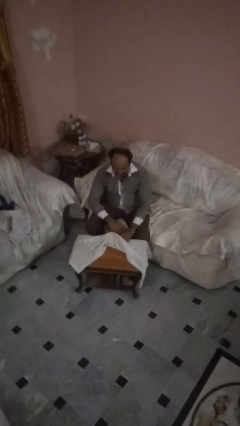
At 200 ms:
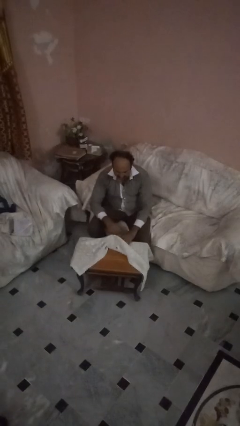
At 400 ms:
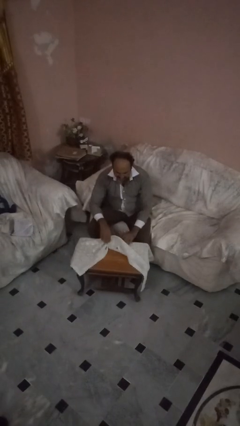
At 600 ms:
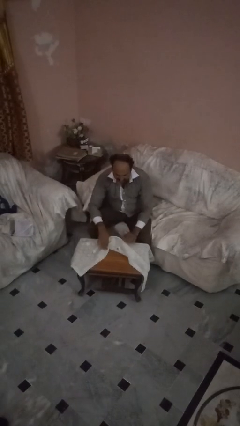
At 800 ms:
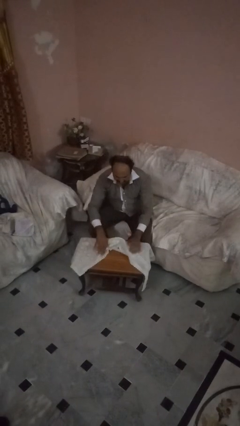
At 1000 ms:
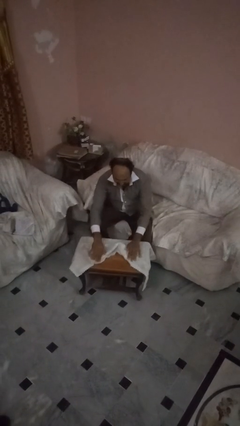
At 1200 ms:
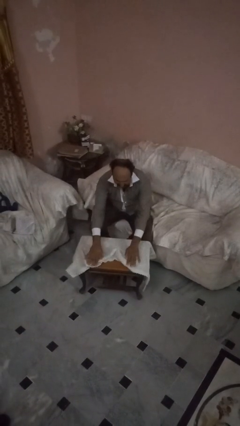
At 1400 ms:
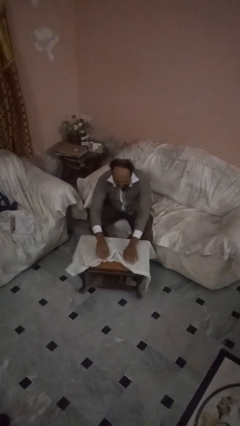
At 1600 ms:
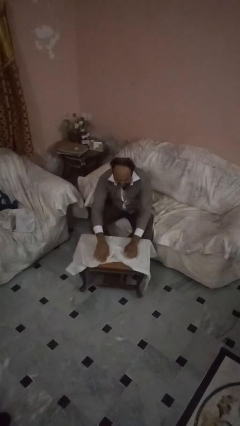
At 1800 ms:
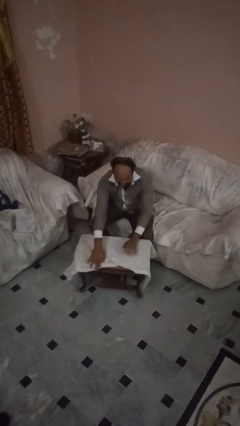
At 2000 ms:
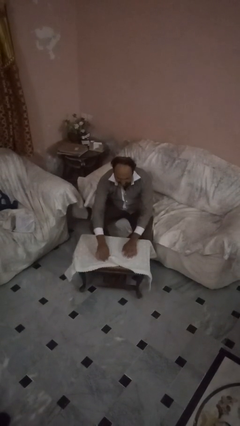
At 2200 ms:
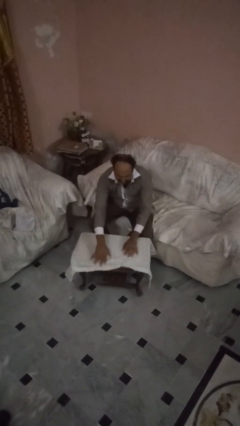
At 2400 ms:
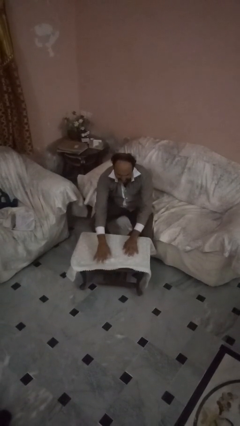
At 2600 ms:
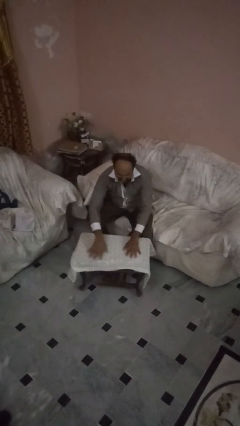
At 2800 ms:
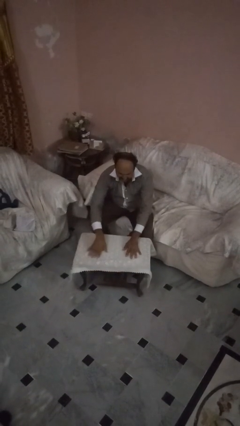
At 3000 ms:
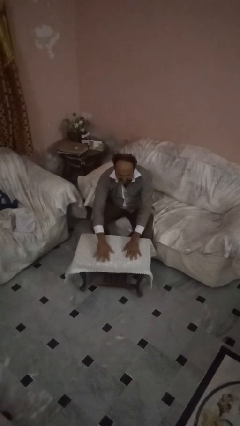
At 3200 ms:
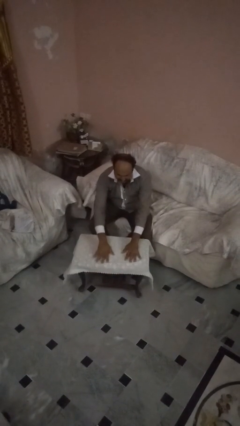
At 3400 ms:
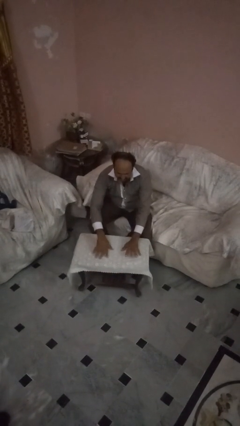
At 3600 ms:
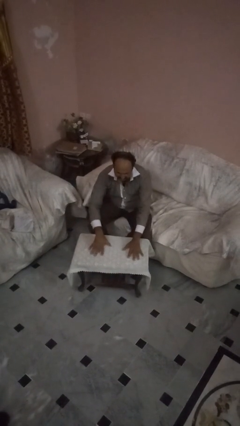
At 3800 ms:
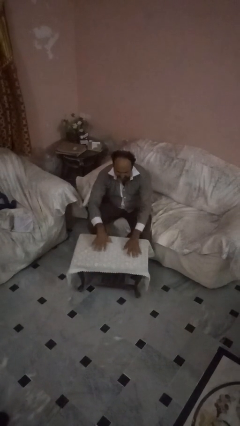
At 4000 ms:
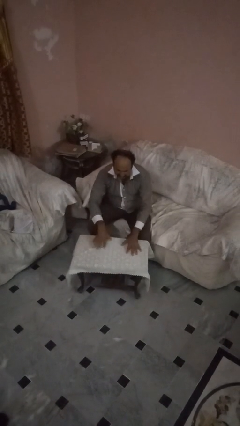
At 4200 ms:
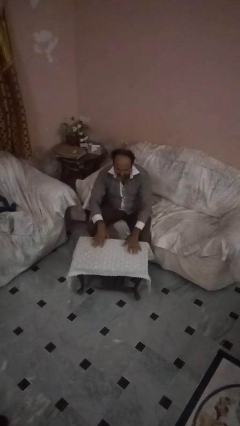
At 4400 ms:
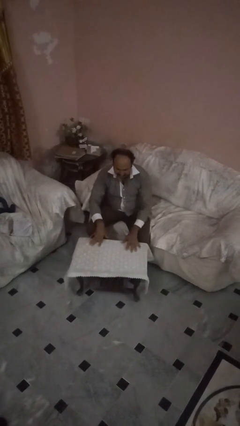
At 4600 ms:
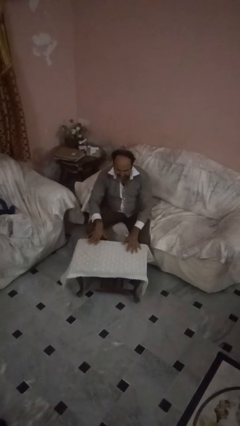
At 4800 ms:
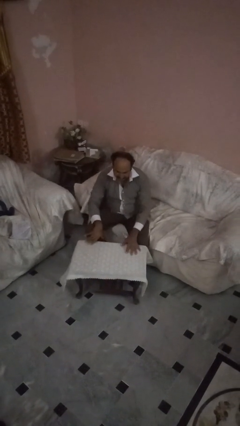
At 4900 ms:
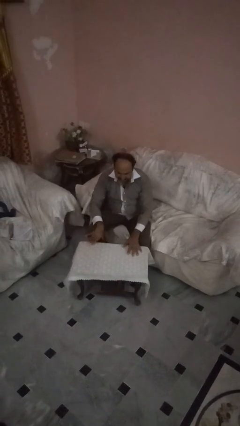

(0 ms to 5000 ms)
person spreads tablecloth

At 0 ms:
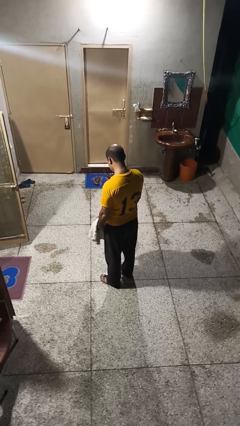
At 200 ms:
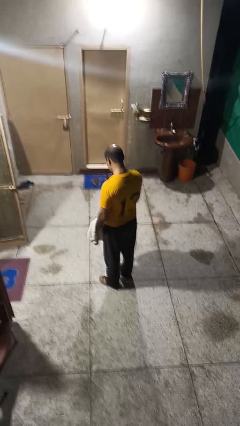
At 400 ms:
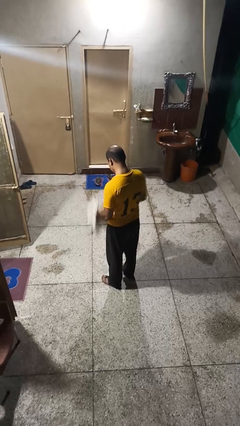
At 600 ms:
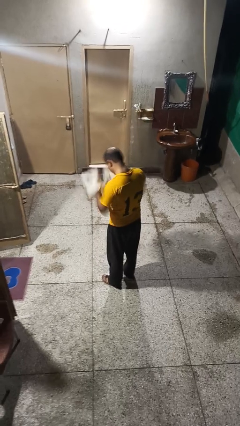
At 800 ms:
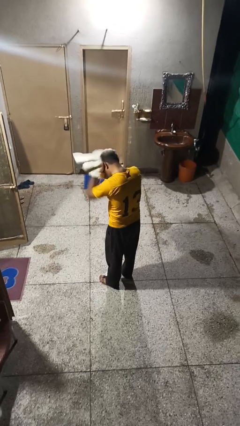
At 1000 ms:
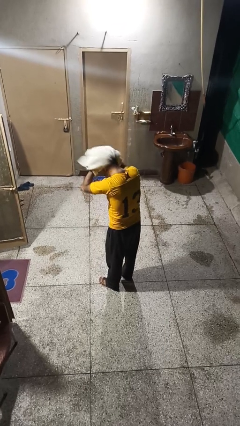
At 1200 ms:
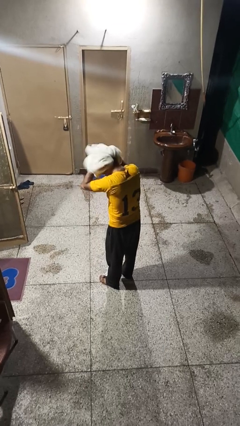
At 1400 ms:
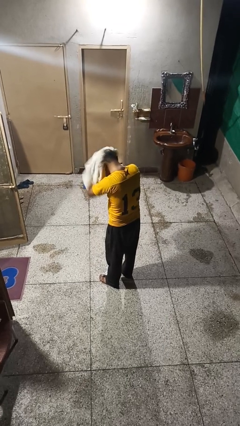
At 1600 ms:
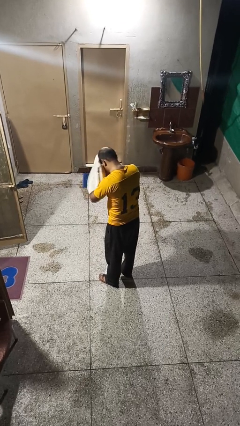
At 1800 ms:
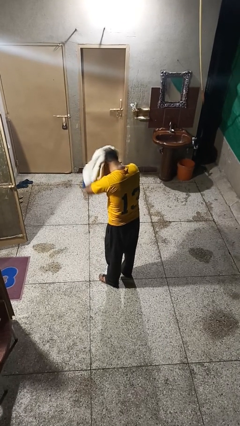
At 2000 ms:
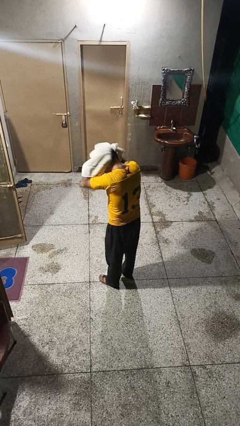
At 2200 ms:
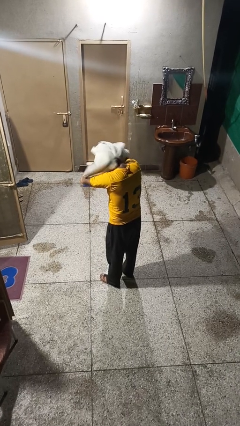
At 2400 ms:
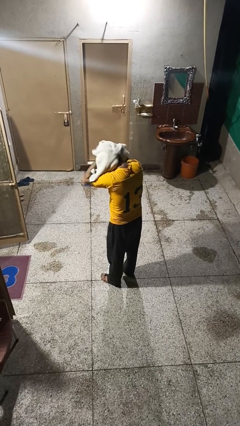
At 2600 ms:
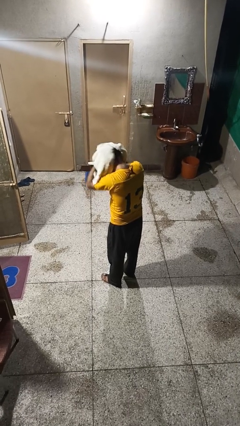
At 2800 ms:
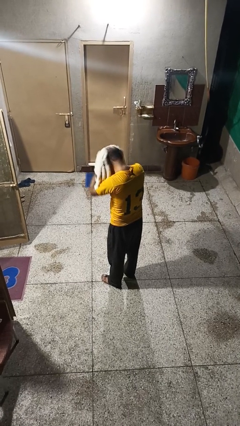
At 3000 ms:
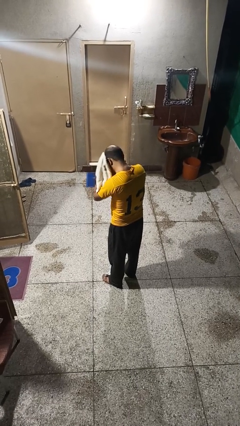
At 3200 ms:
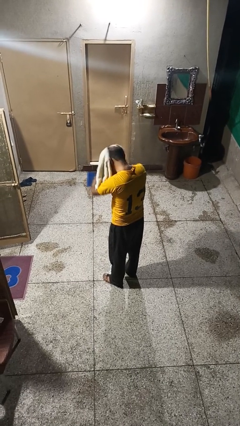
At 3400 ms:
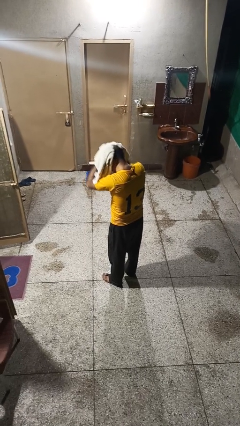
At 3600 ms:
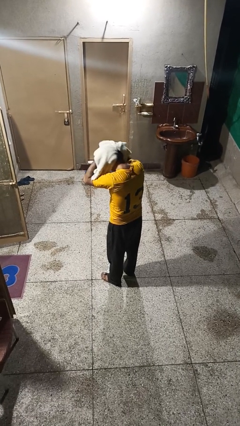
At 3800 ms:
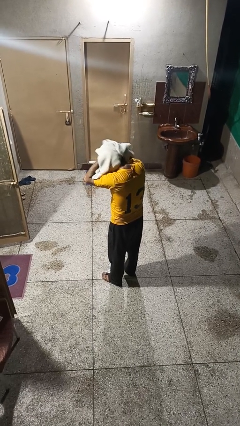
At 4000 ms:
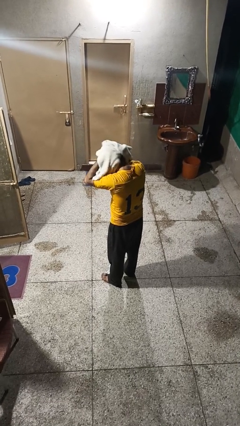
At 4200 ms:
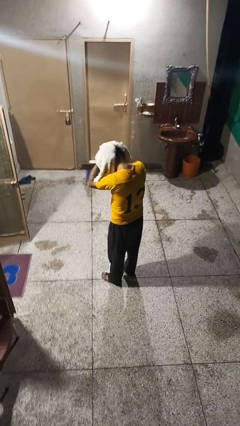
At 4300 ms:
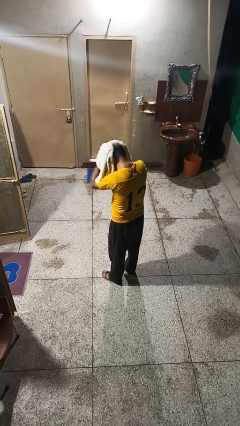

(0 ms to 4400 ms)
person dries hair with towel

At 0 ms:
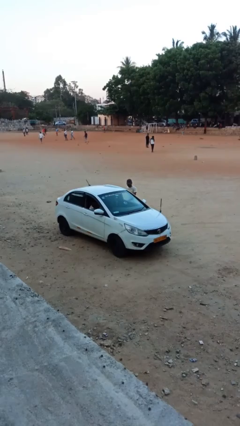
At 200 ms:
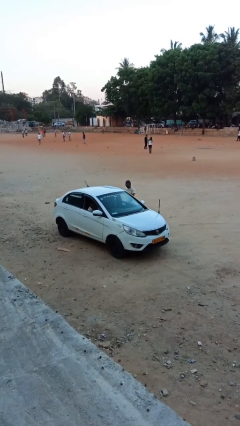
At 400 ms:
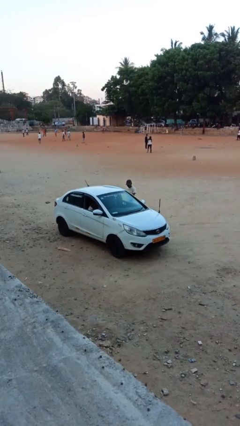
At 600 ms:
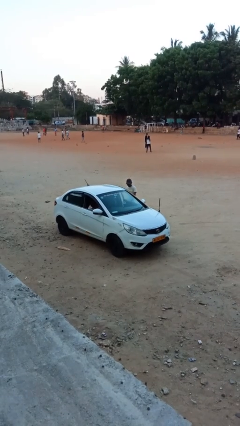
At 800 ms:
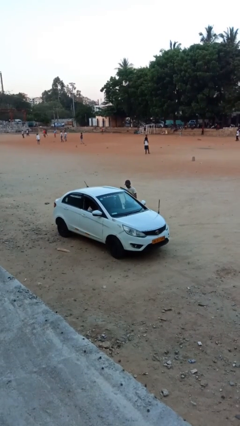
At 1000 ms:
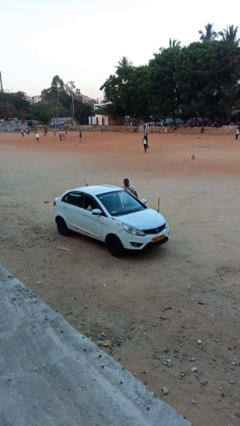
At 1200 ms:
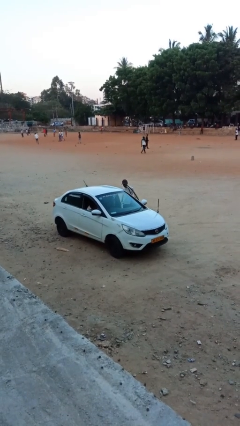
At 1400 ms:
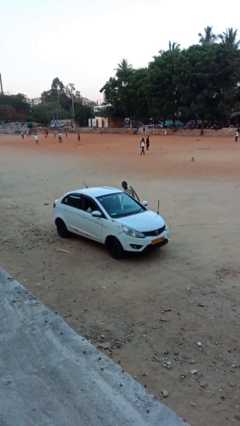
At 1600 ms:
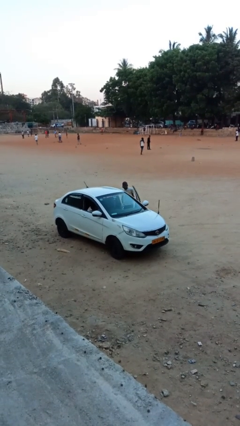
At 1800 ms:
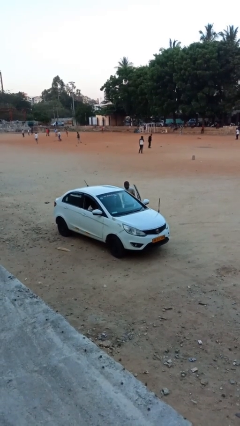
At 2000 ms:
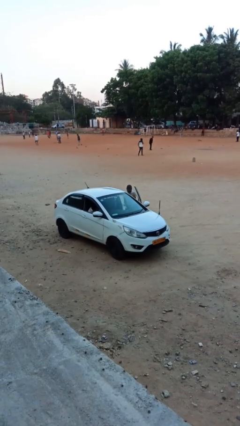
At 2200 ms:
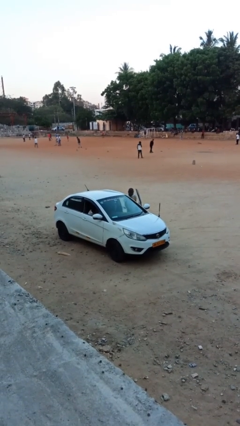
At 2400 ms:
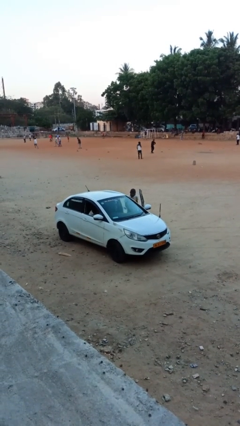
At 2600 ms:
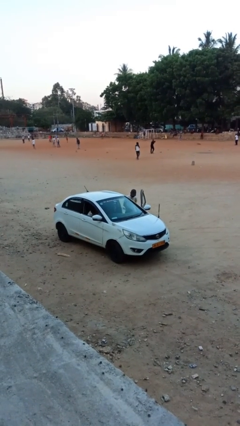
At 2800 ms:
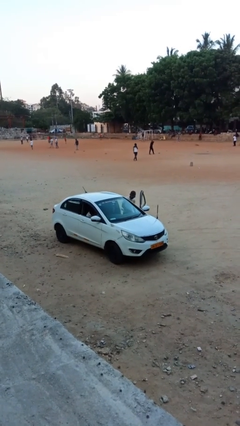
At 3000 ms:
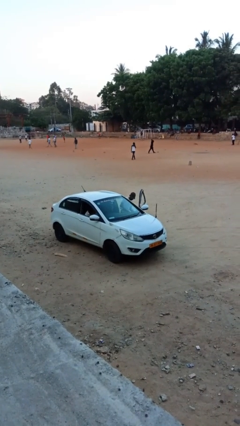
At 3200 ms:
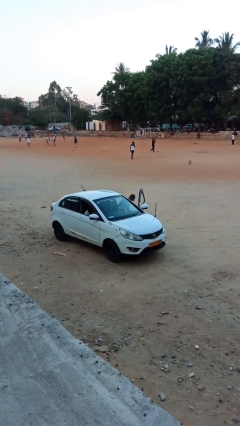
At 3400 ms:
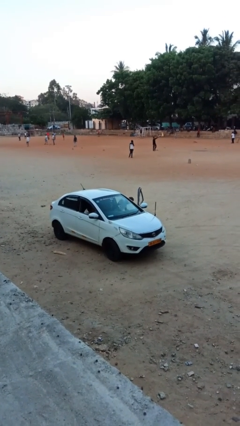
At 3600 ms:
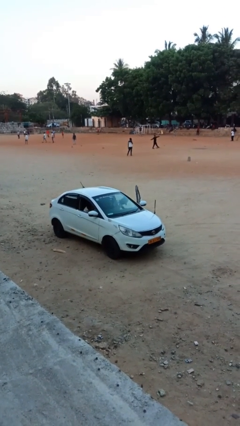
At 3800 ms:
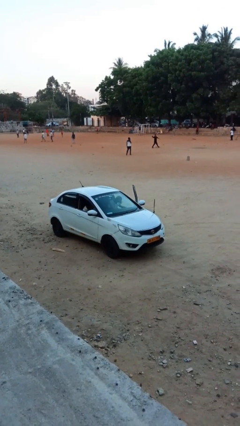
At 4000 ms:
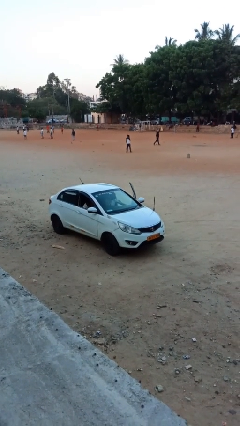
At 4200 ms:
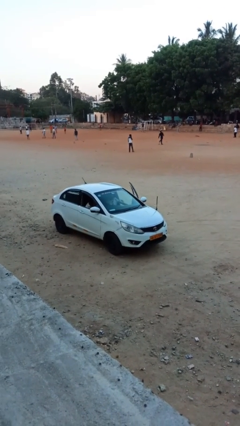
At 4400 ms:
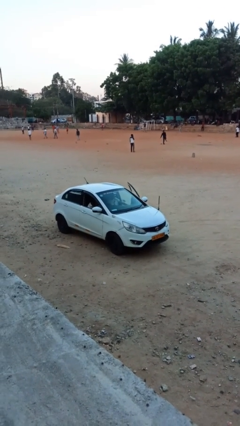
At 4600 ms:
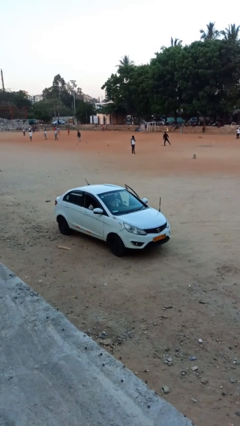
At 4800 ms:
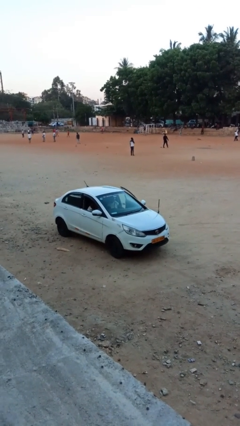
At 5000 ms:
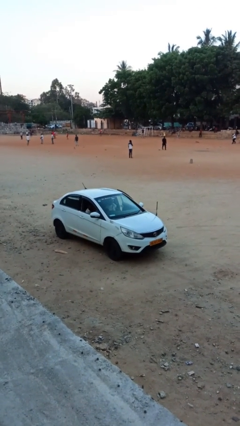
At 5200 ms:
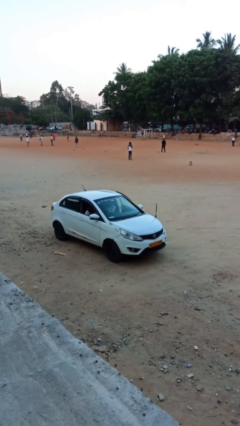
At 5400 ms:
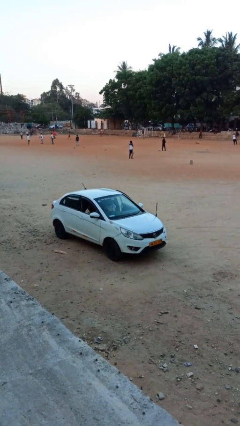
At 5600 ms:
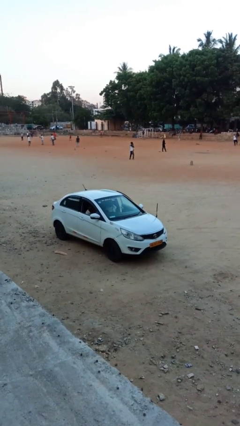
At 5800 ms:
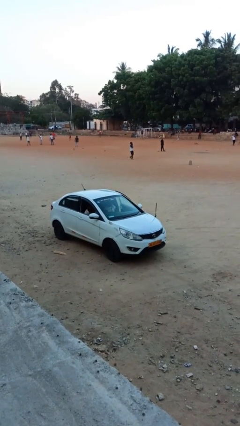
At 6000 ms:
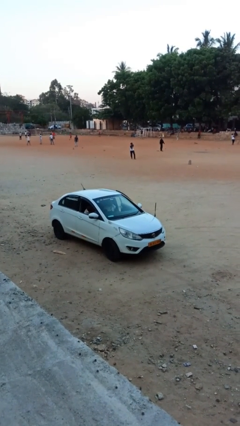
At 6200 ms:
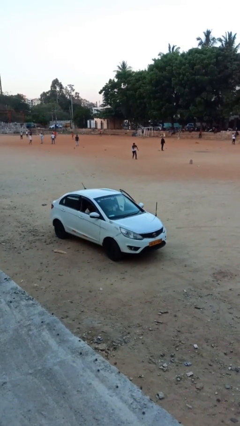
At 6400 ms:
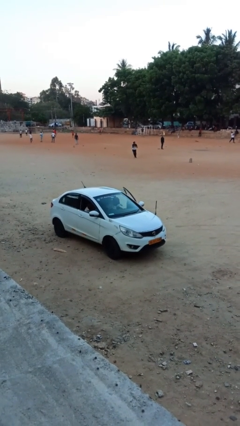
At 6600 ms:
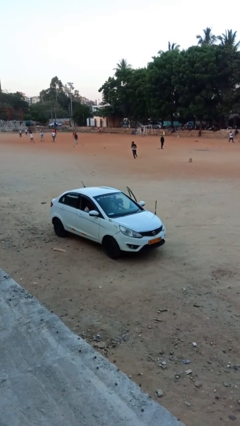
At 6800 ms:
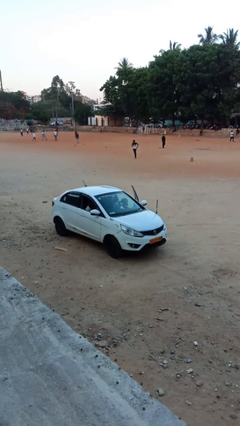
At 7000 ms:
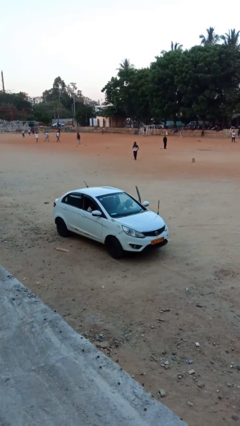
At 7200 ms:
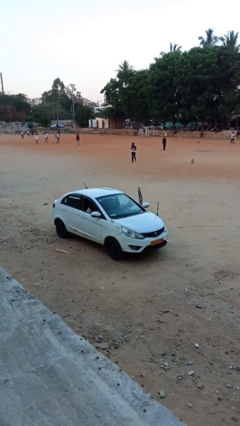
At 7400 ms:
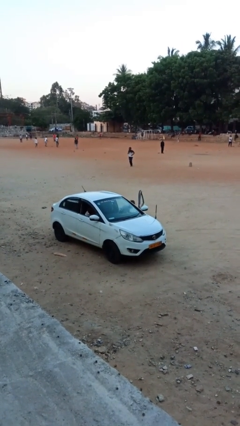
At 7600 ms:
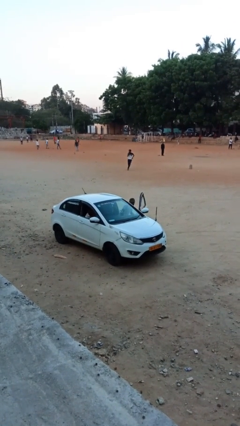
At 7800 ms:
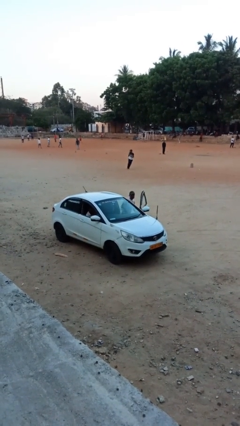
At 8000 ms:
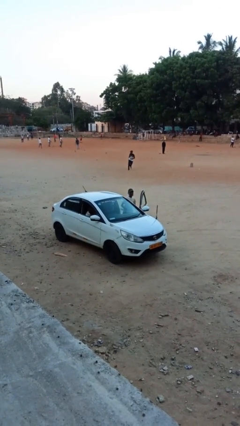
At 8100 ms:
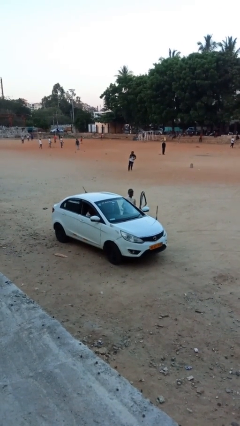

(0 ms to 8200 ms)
car picks up person

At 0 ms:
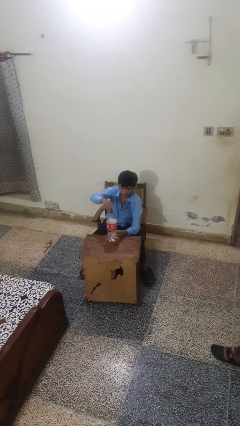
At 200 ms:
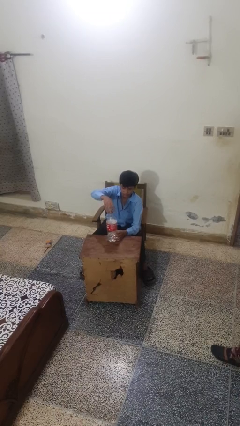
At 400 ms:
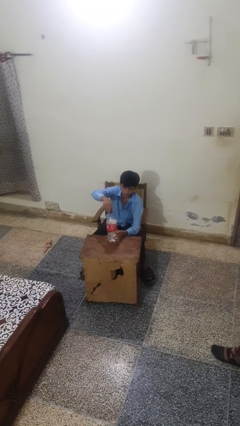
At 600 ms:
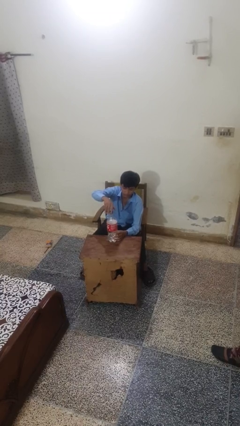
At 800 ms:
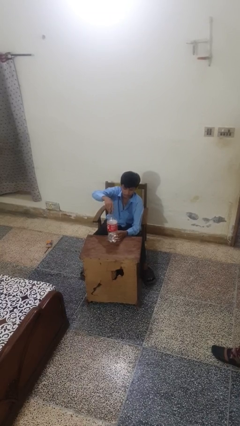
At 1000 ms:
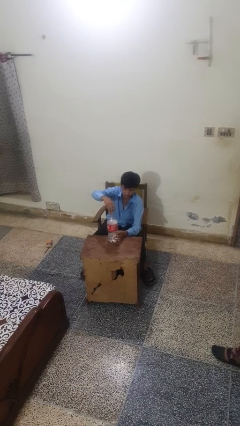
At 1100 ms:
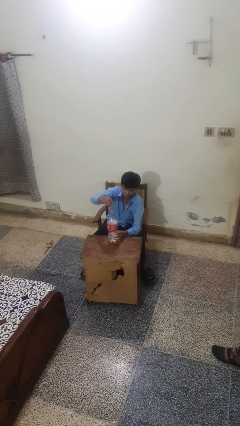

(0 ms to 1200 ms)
person unscrews lid from bottle
